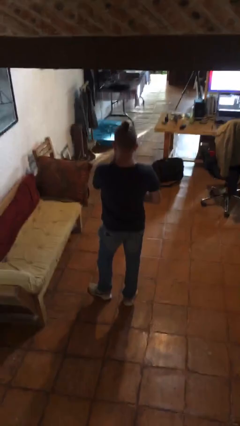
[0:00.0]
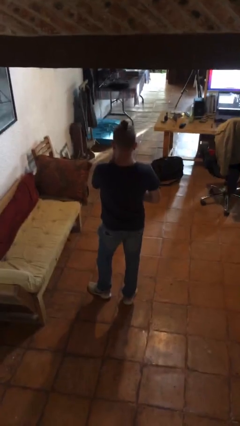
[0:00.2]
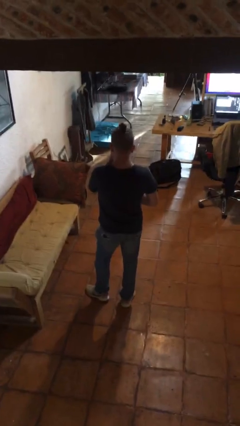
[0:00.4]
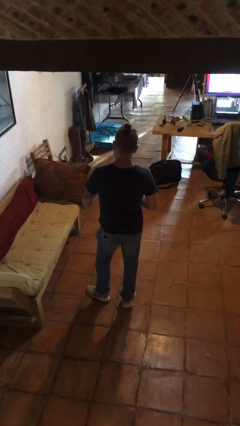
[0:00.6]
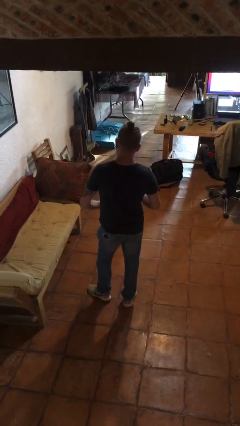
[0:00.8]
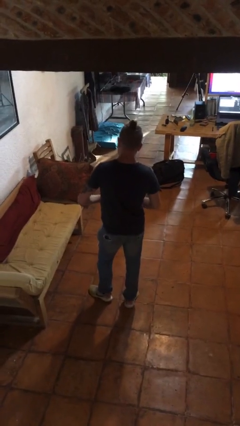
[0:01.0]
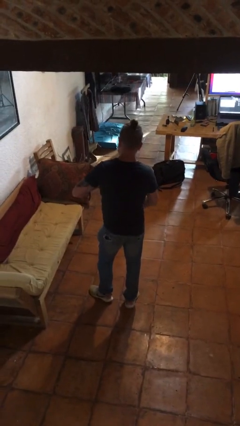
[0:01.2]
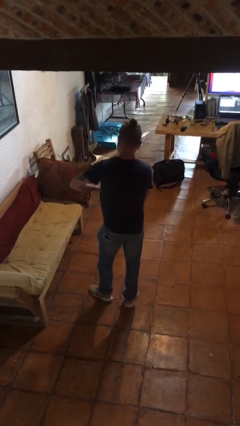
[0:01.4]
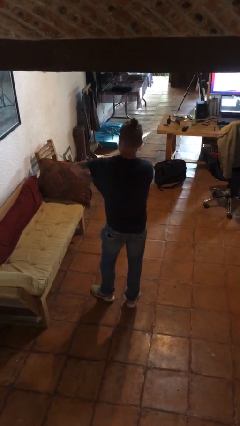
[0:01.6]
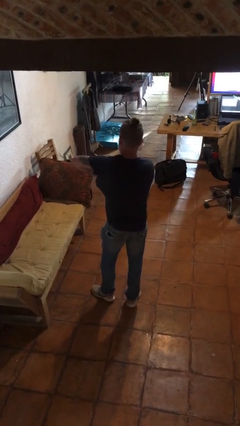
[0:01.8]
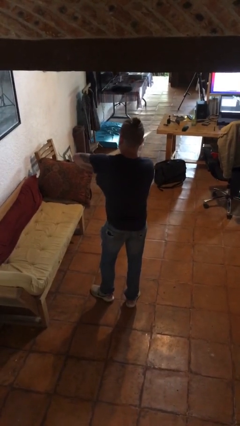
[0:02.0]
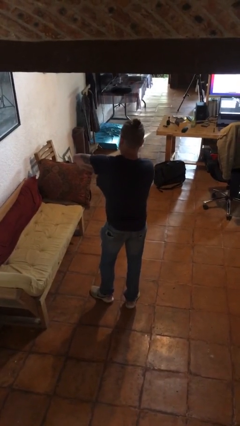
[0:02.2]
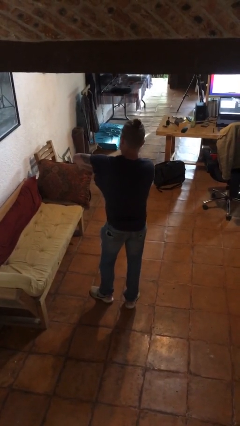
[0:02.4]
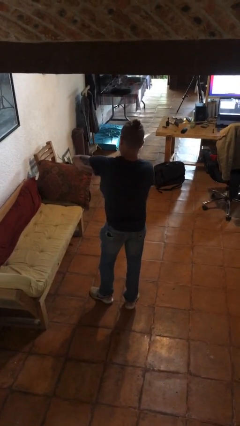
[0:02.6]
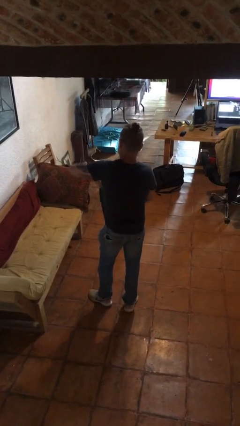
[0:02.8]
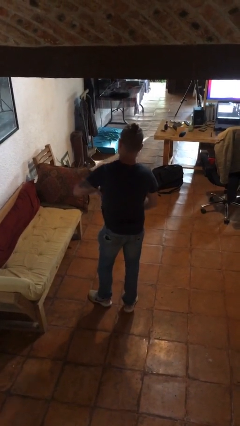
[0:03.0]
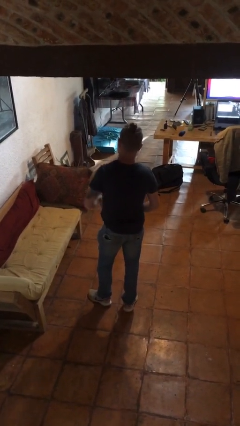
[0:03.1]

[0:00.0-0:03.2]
person applies deodorant

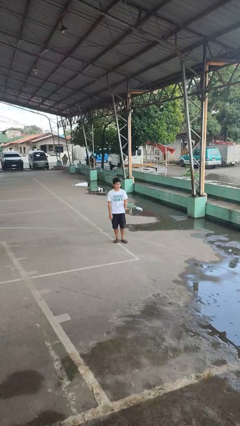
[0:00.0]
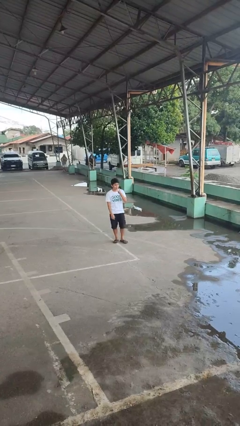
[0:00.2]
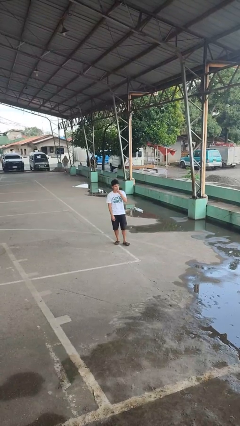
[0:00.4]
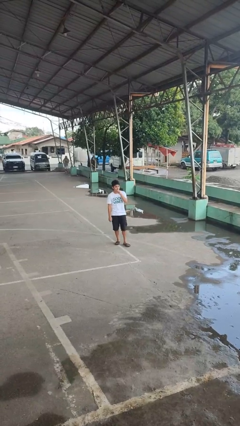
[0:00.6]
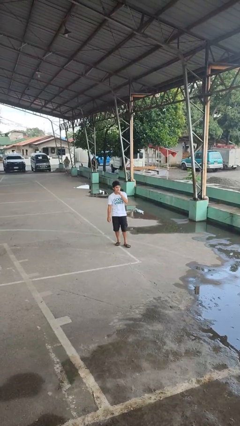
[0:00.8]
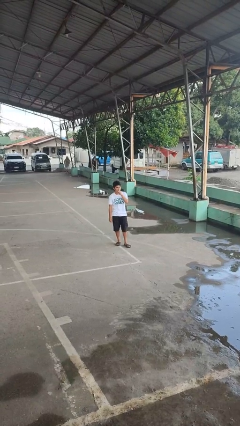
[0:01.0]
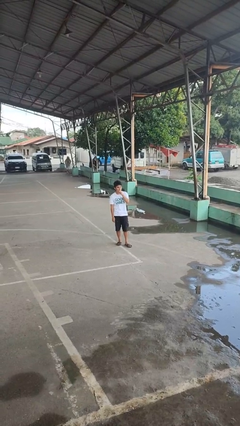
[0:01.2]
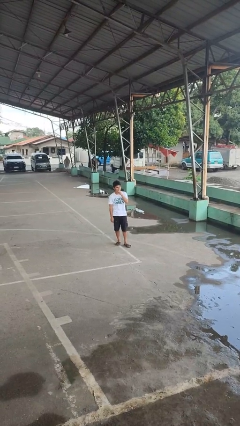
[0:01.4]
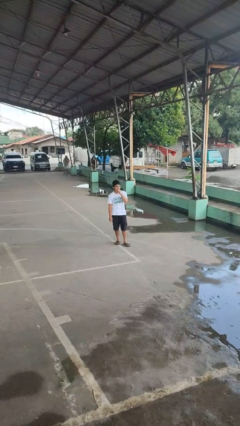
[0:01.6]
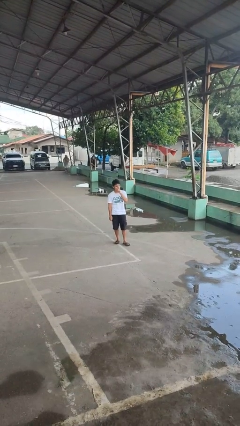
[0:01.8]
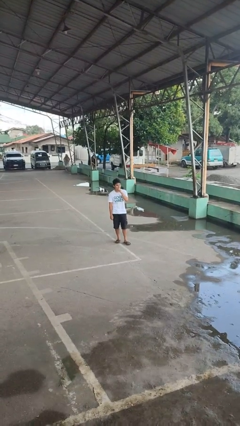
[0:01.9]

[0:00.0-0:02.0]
person gestures be quiet

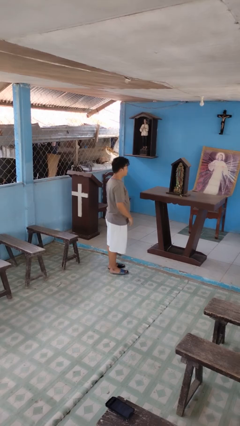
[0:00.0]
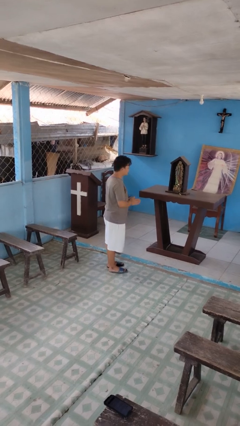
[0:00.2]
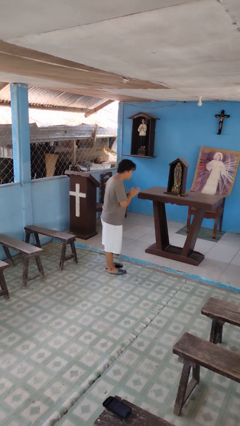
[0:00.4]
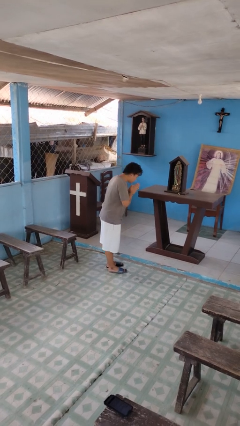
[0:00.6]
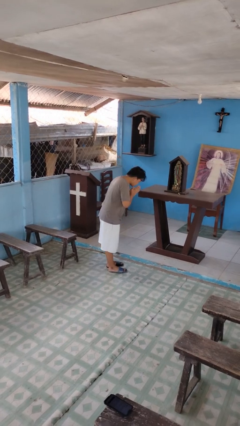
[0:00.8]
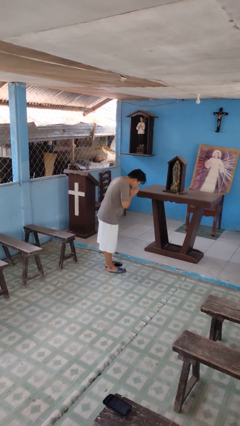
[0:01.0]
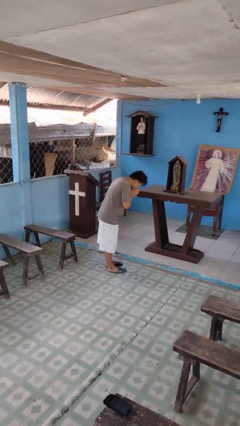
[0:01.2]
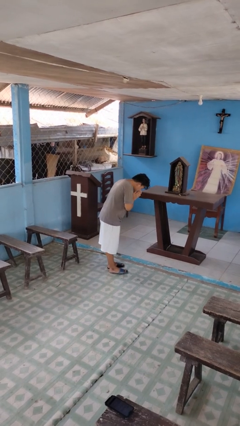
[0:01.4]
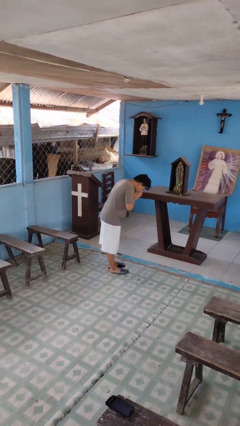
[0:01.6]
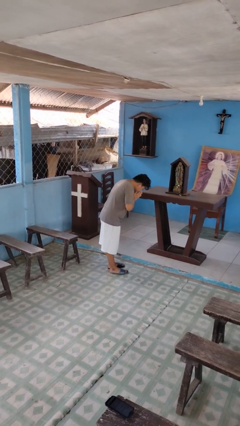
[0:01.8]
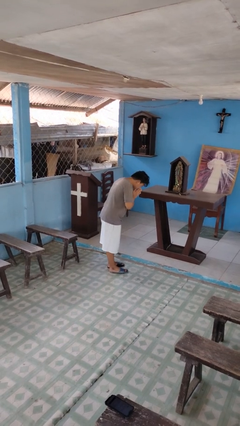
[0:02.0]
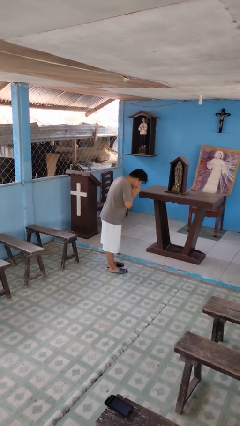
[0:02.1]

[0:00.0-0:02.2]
person prays

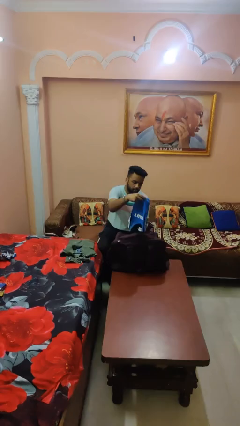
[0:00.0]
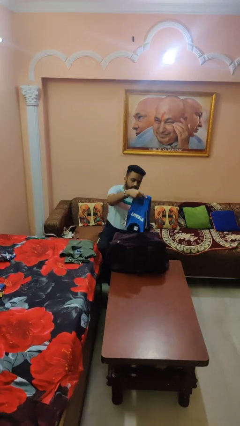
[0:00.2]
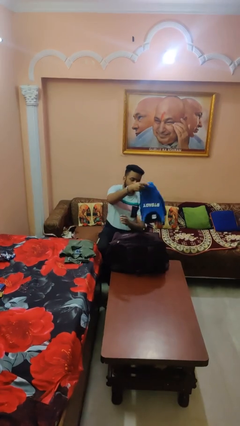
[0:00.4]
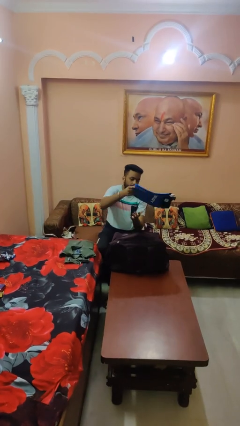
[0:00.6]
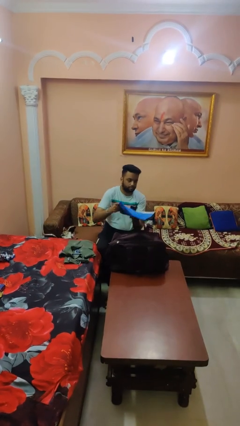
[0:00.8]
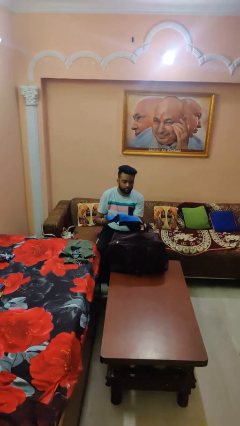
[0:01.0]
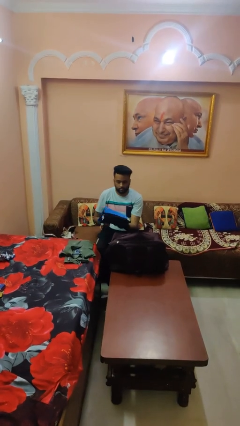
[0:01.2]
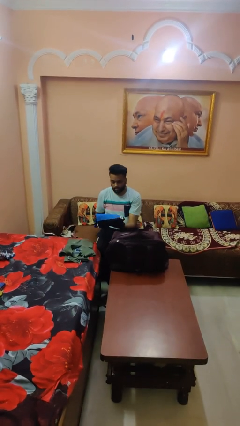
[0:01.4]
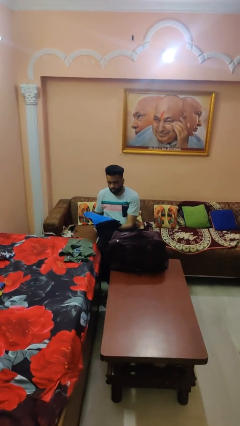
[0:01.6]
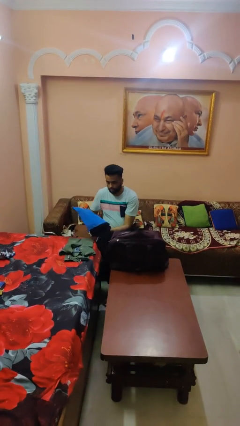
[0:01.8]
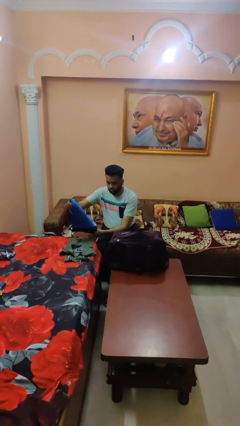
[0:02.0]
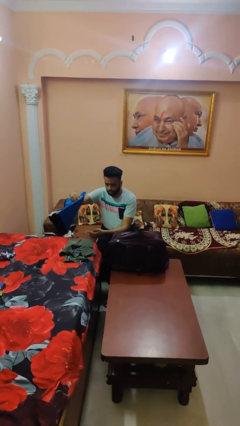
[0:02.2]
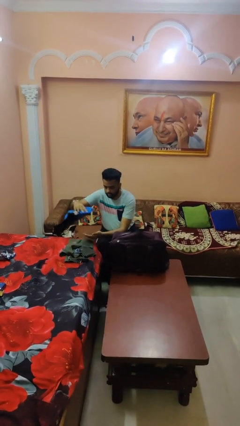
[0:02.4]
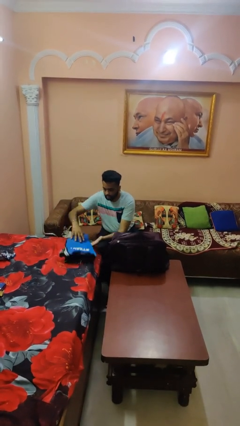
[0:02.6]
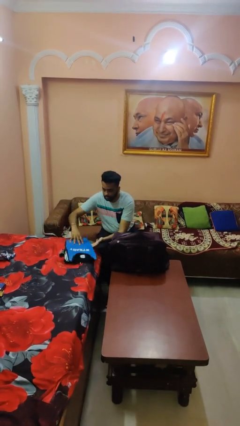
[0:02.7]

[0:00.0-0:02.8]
person unloads clothes from suitcase

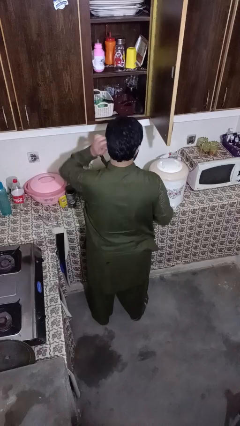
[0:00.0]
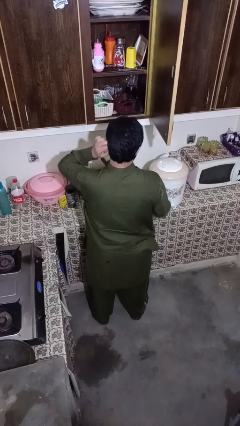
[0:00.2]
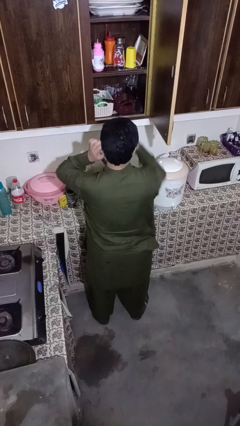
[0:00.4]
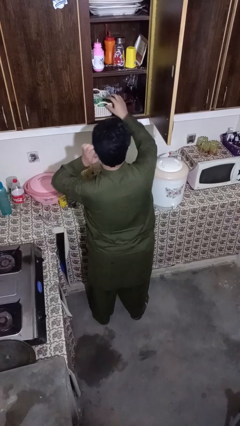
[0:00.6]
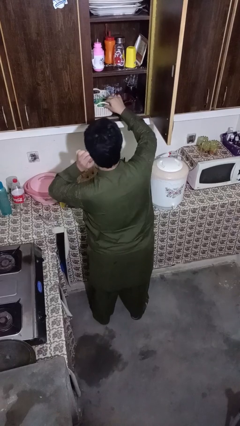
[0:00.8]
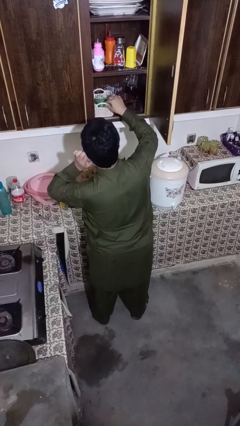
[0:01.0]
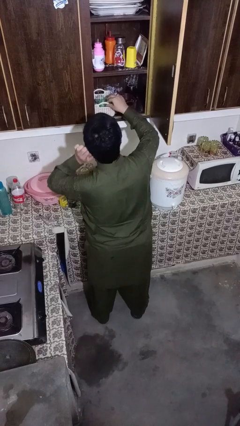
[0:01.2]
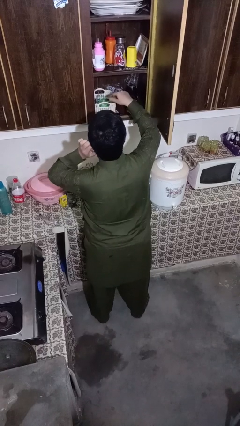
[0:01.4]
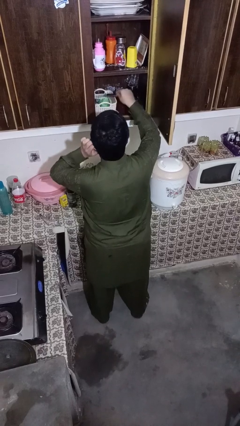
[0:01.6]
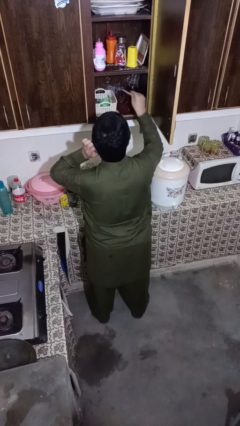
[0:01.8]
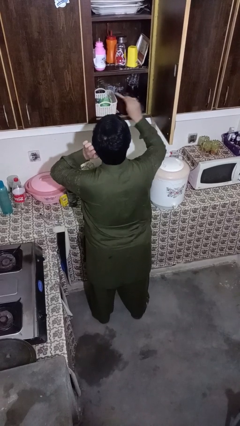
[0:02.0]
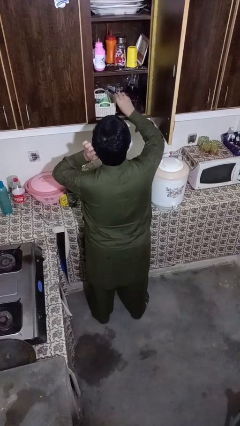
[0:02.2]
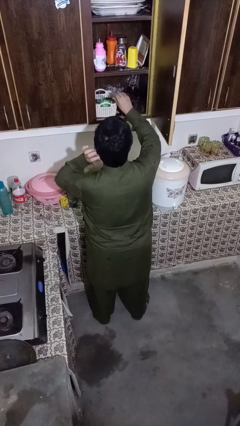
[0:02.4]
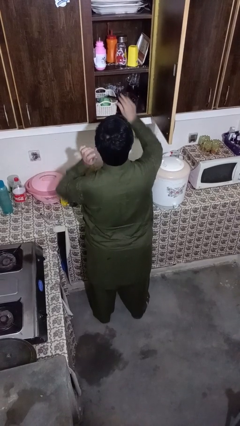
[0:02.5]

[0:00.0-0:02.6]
person searches in kitchen drawer

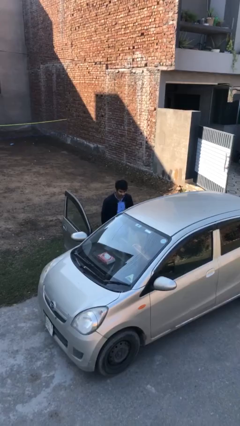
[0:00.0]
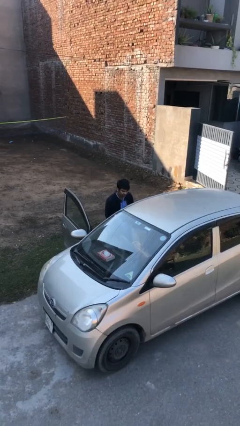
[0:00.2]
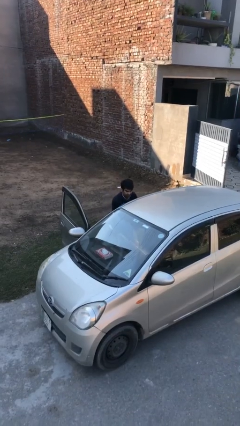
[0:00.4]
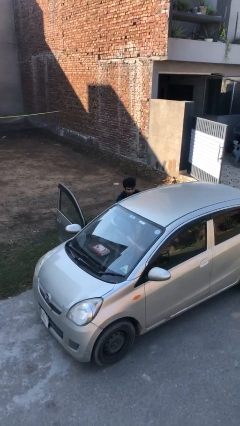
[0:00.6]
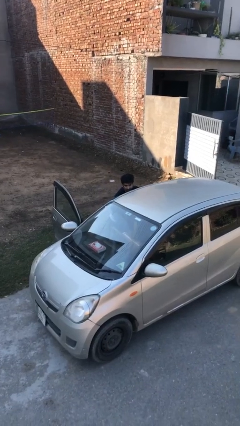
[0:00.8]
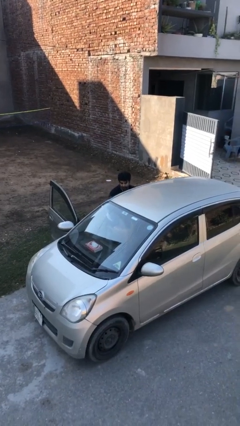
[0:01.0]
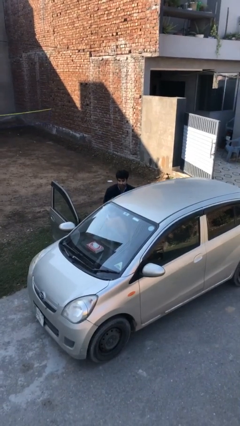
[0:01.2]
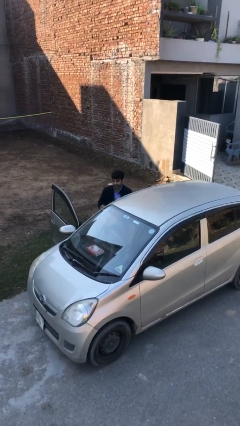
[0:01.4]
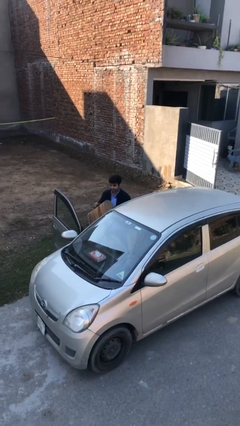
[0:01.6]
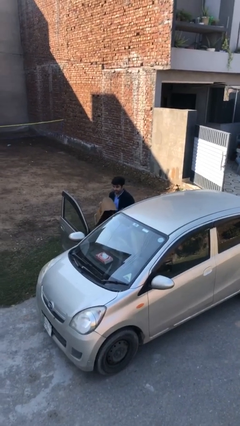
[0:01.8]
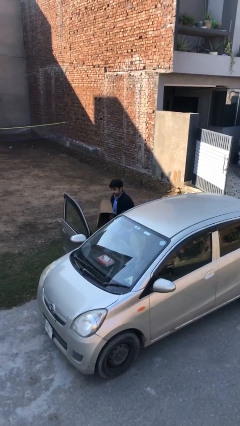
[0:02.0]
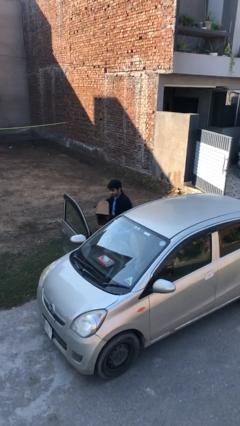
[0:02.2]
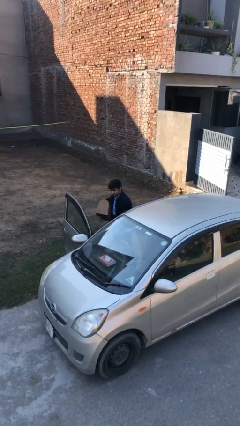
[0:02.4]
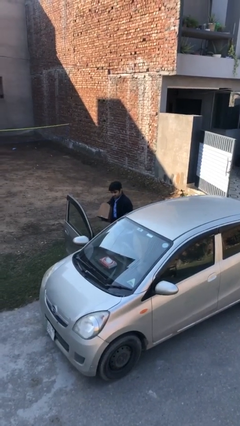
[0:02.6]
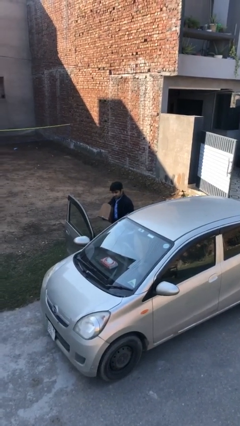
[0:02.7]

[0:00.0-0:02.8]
person unloads car

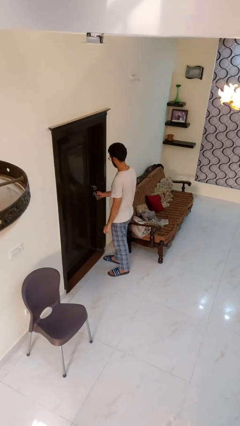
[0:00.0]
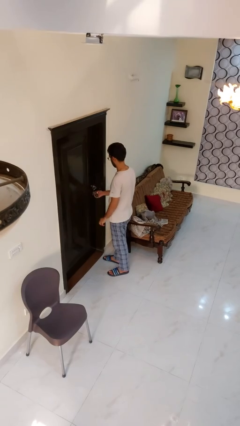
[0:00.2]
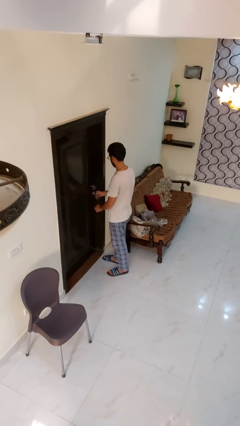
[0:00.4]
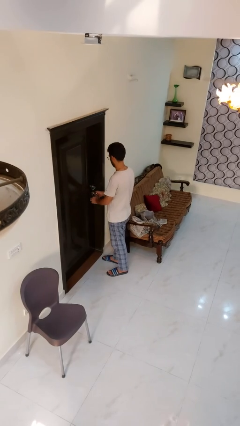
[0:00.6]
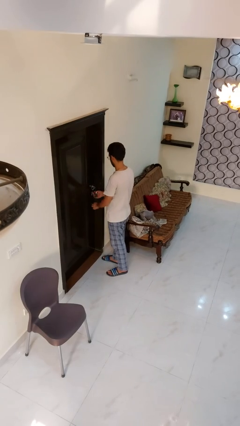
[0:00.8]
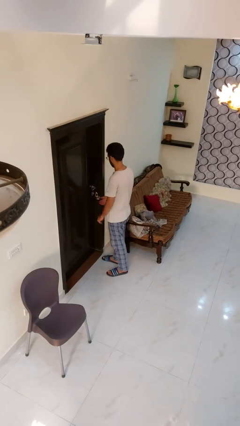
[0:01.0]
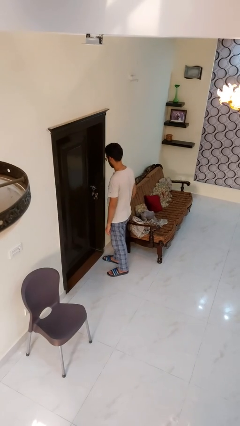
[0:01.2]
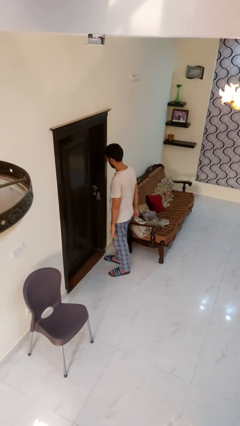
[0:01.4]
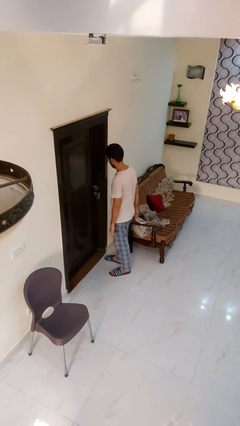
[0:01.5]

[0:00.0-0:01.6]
person locks door with keys
